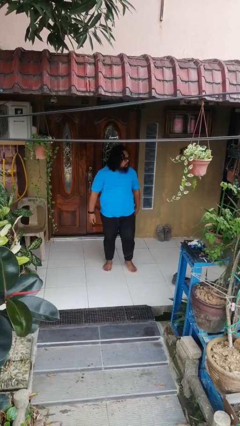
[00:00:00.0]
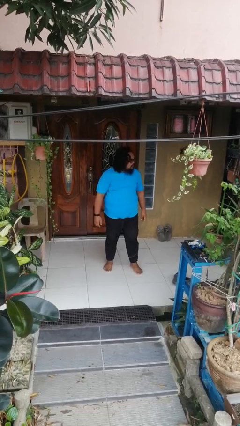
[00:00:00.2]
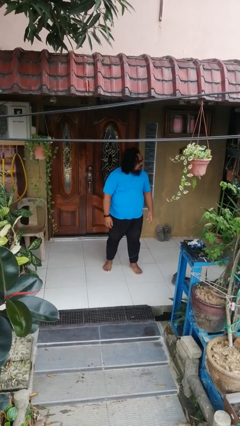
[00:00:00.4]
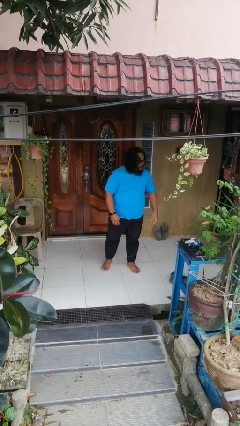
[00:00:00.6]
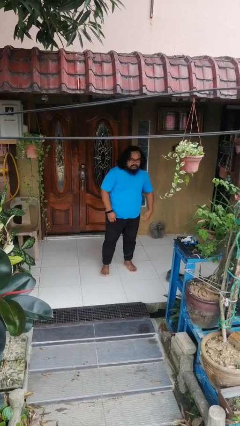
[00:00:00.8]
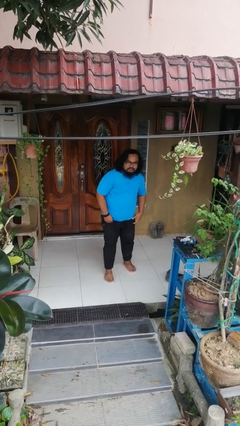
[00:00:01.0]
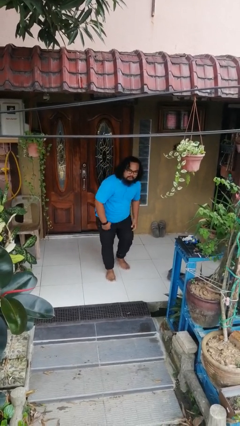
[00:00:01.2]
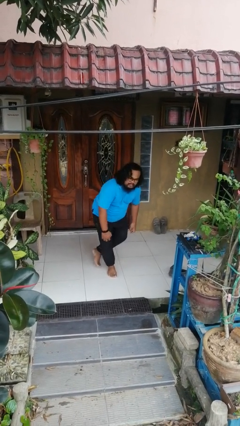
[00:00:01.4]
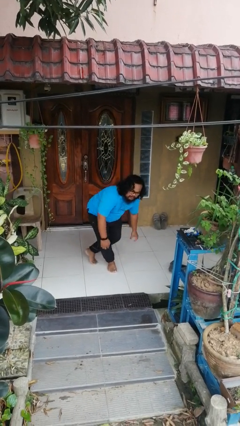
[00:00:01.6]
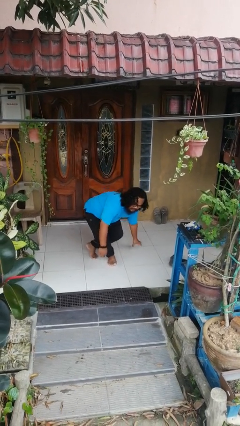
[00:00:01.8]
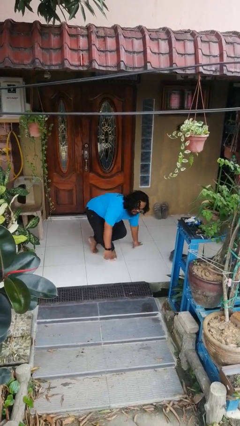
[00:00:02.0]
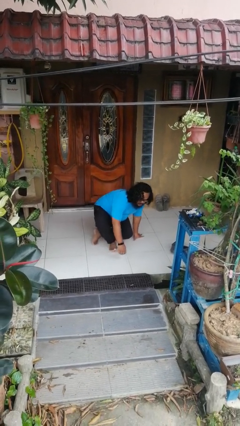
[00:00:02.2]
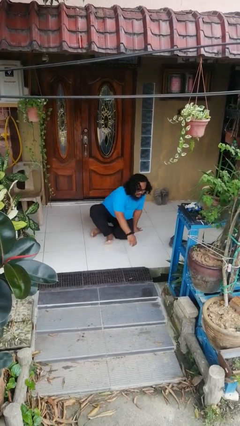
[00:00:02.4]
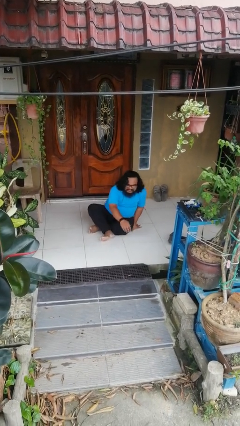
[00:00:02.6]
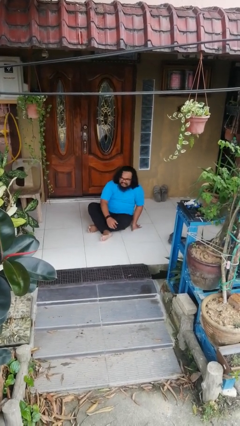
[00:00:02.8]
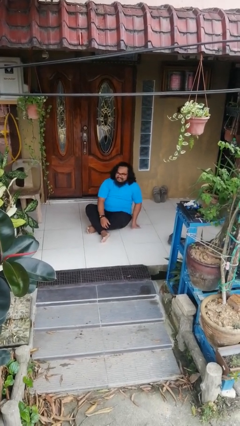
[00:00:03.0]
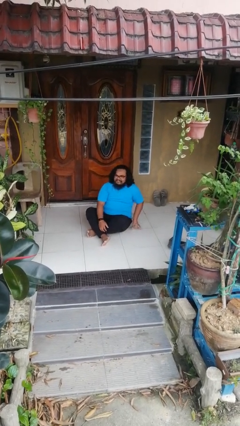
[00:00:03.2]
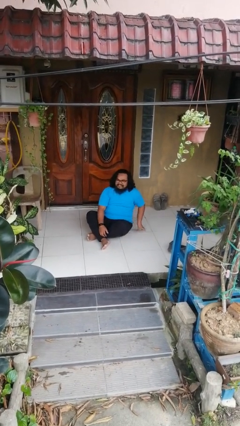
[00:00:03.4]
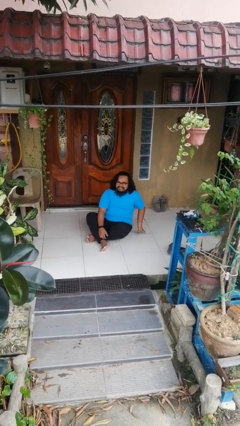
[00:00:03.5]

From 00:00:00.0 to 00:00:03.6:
person sits crisscross

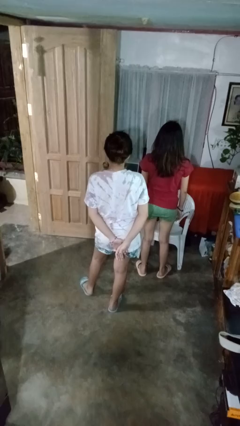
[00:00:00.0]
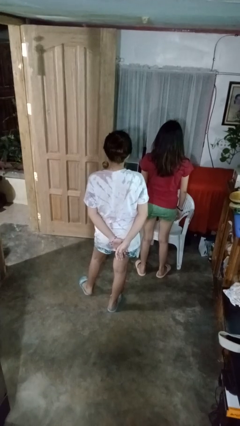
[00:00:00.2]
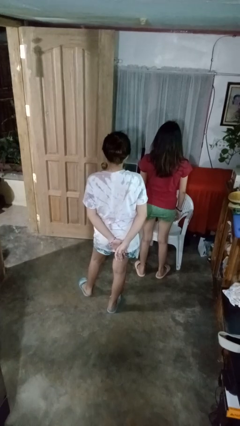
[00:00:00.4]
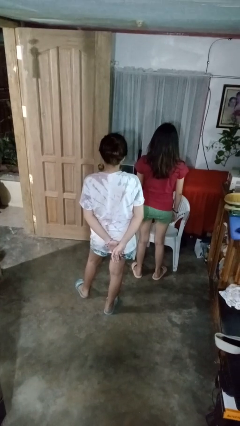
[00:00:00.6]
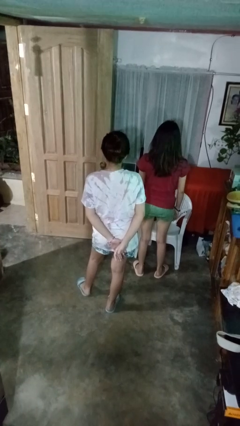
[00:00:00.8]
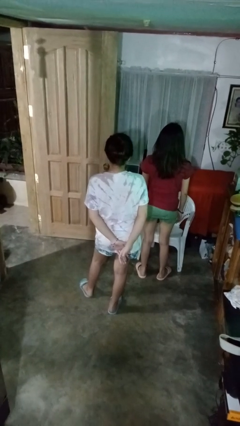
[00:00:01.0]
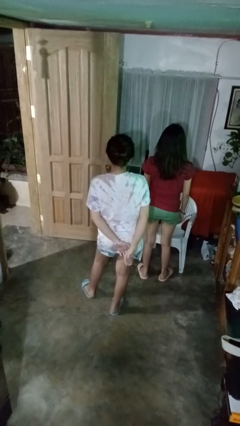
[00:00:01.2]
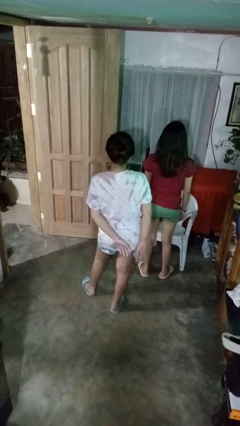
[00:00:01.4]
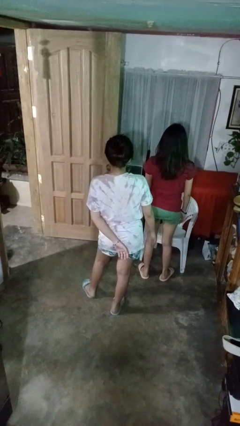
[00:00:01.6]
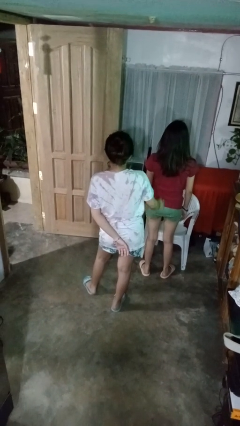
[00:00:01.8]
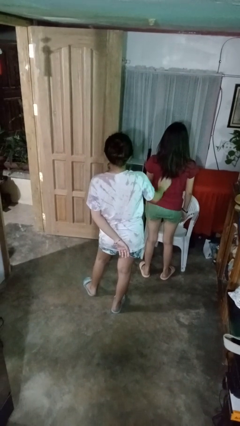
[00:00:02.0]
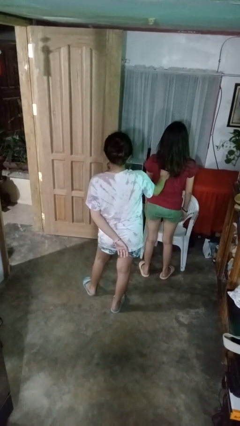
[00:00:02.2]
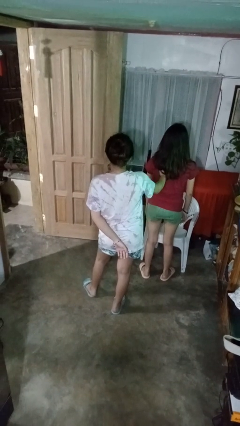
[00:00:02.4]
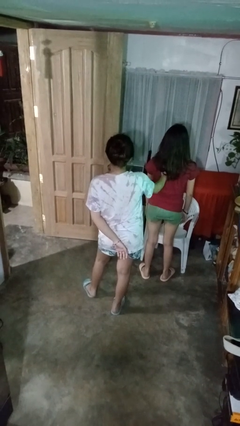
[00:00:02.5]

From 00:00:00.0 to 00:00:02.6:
person touches back of person

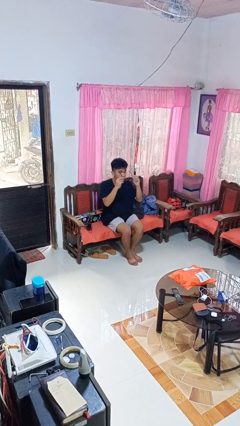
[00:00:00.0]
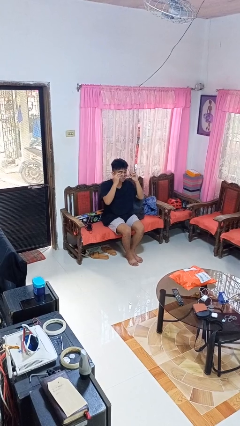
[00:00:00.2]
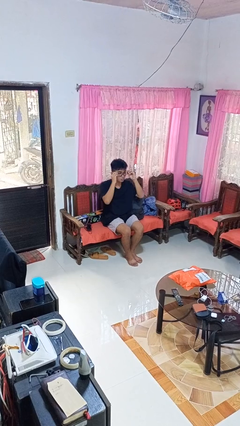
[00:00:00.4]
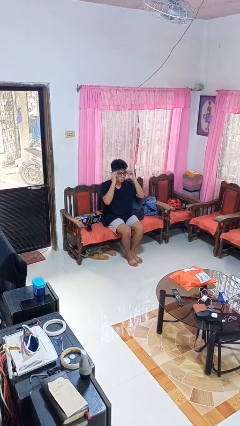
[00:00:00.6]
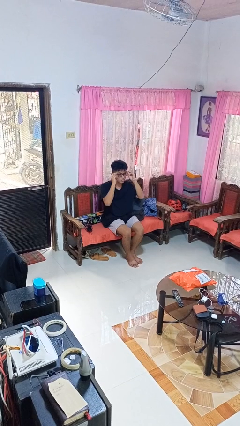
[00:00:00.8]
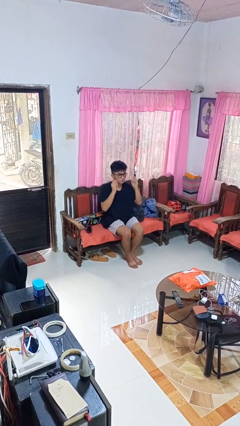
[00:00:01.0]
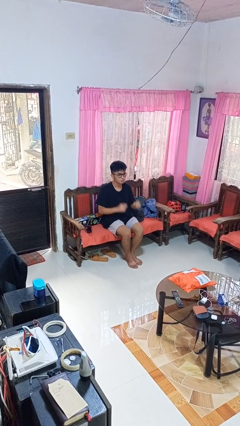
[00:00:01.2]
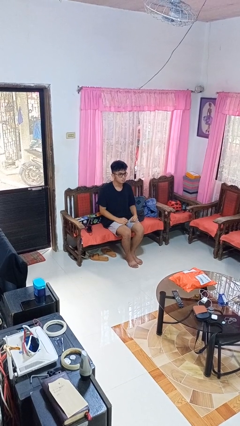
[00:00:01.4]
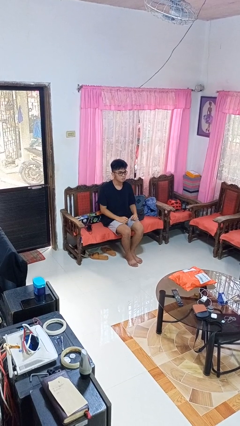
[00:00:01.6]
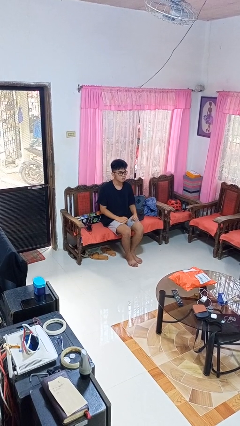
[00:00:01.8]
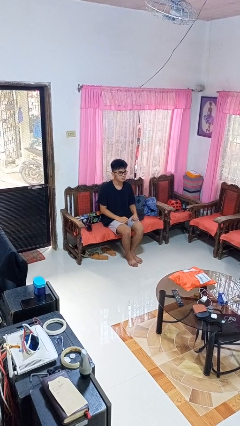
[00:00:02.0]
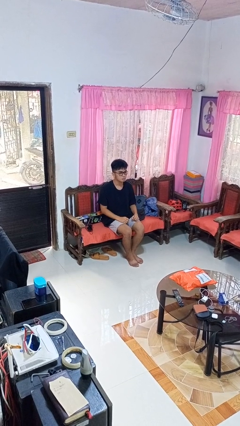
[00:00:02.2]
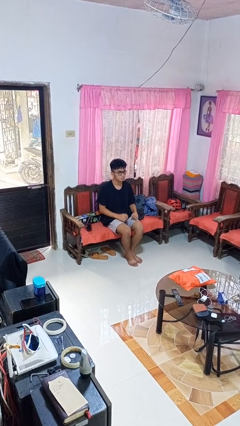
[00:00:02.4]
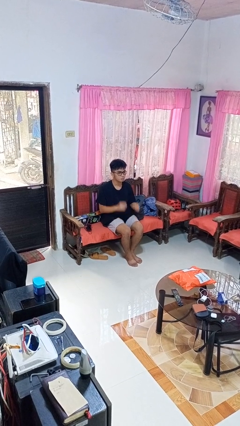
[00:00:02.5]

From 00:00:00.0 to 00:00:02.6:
person puts on glasses

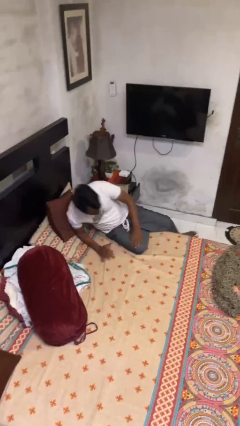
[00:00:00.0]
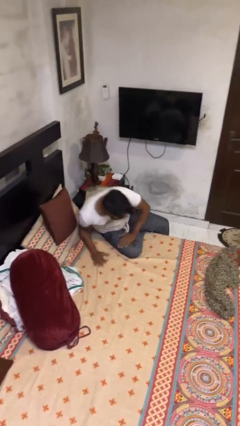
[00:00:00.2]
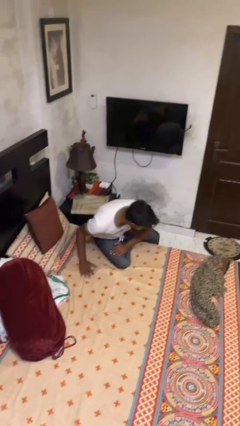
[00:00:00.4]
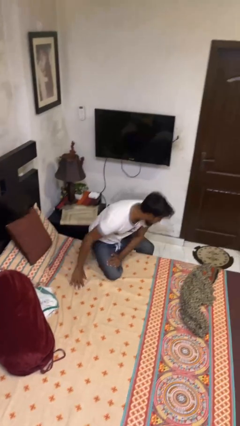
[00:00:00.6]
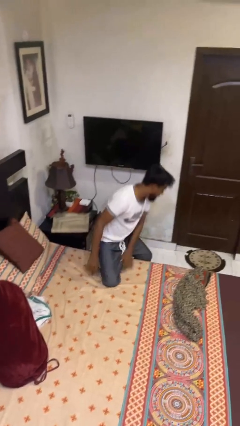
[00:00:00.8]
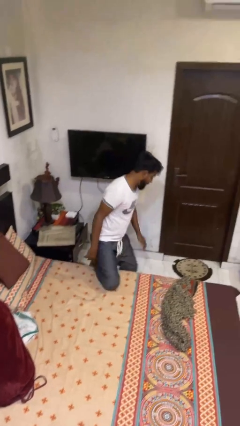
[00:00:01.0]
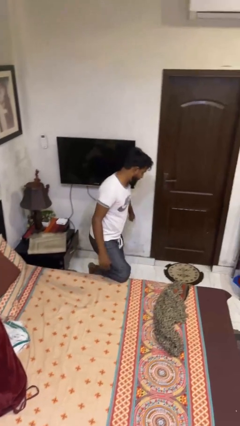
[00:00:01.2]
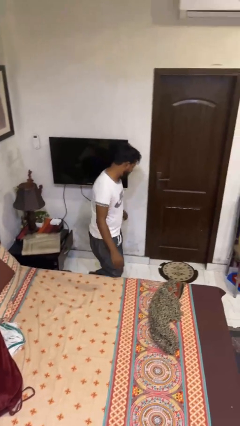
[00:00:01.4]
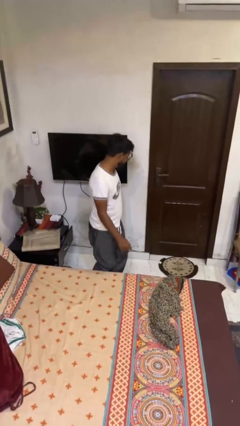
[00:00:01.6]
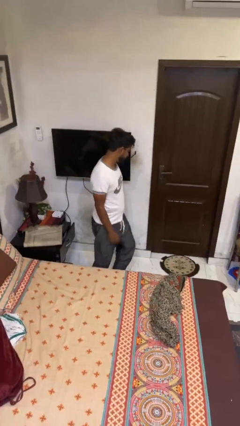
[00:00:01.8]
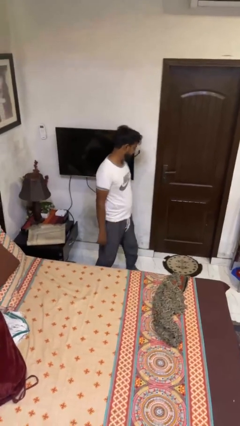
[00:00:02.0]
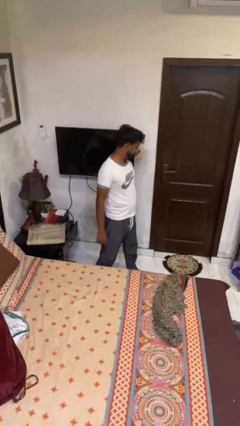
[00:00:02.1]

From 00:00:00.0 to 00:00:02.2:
person stands up

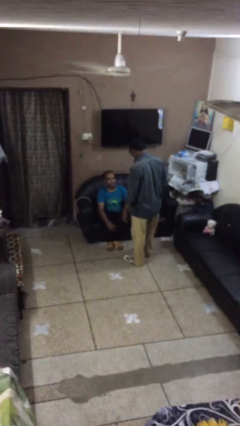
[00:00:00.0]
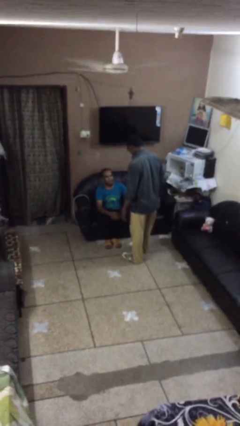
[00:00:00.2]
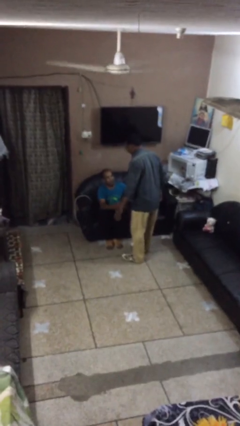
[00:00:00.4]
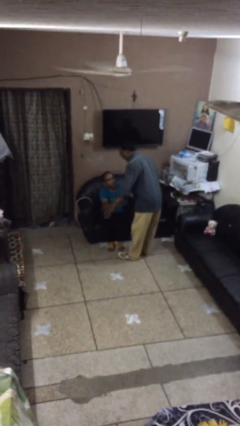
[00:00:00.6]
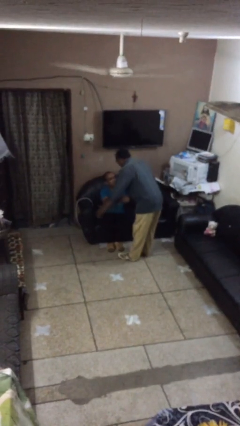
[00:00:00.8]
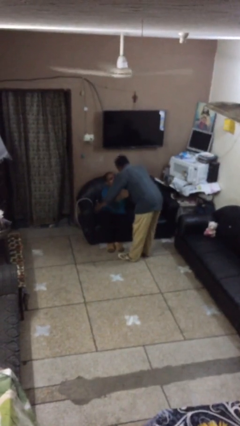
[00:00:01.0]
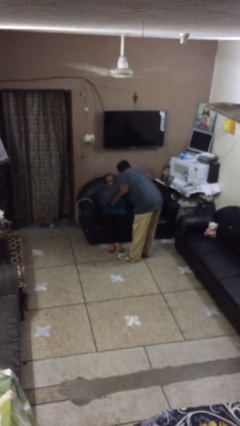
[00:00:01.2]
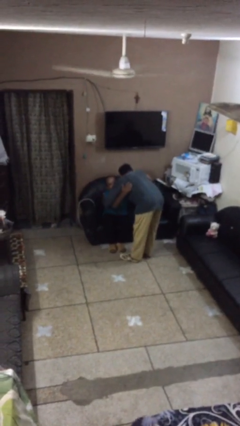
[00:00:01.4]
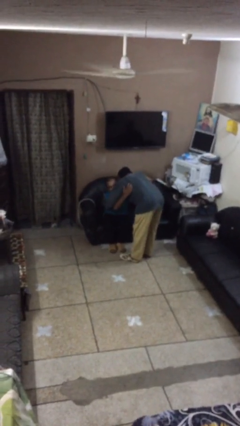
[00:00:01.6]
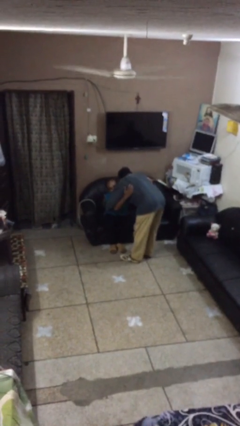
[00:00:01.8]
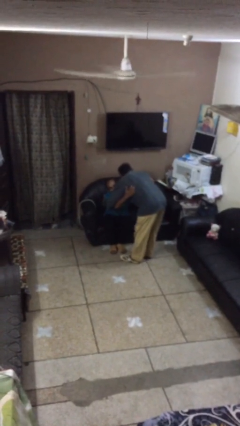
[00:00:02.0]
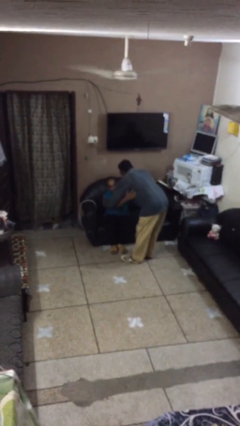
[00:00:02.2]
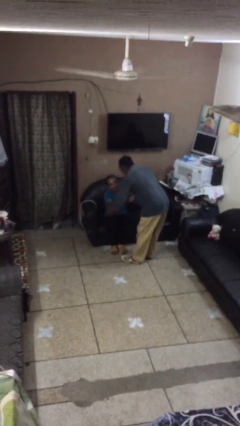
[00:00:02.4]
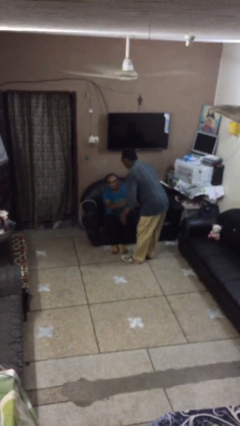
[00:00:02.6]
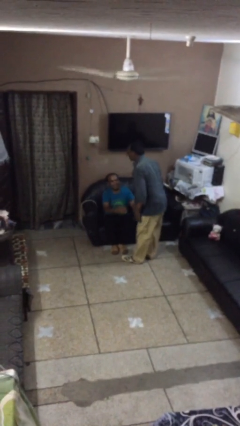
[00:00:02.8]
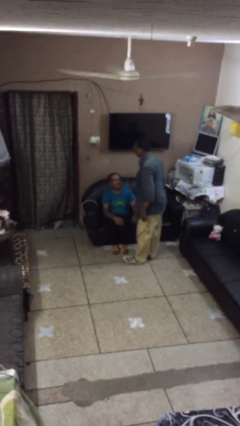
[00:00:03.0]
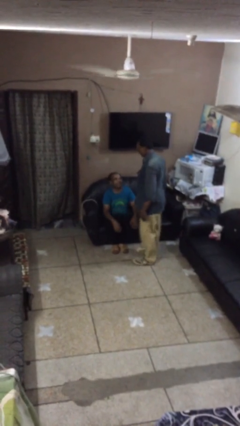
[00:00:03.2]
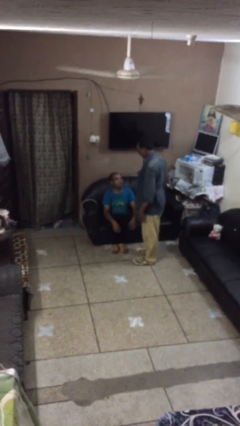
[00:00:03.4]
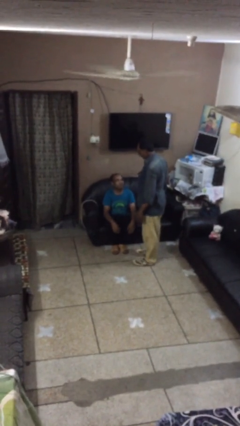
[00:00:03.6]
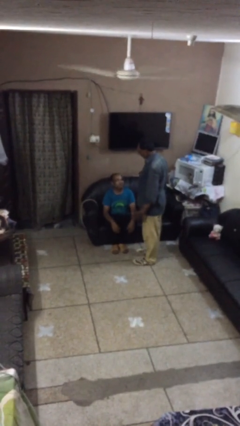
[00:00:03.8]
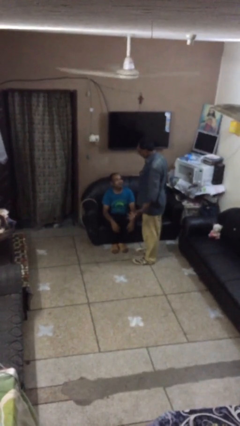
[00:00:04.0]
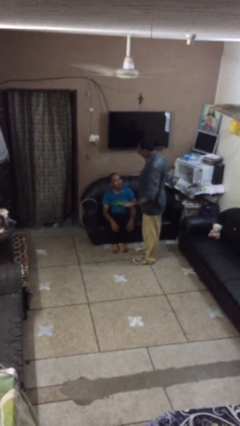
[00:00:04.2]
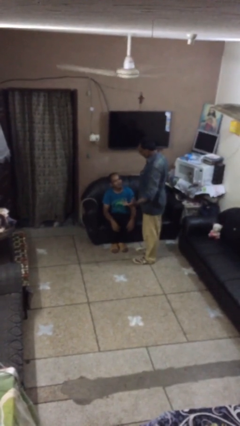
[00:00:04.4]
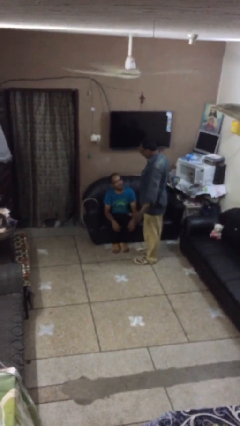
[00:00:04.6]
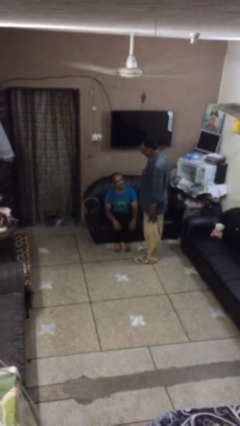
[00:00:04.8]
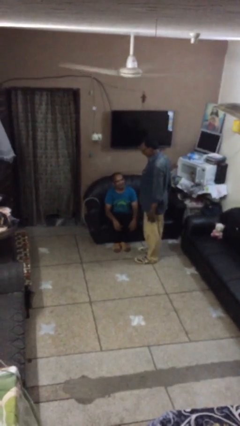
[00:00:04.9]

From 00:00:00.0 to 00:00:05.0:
person embraces person

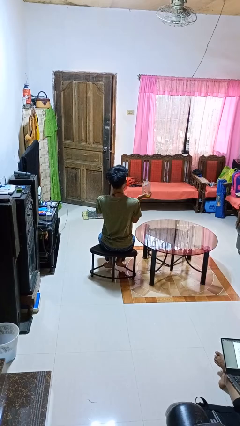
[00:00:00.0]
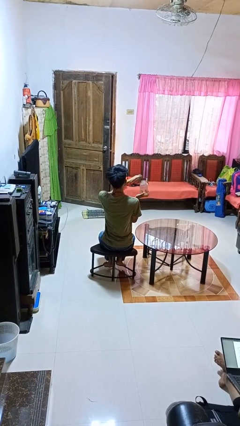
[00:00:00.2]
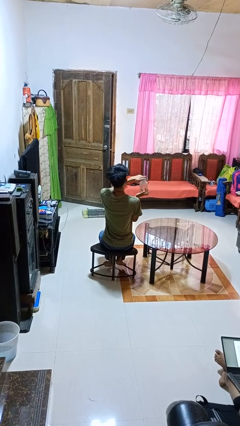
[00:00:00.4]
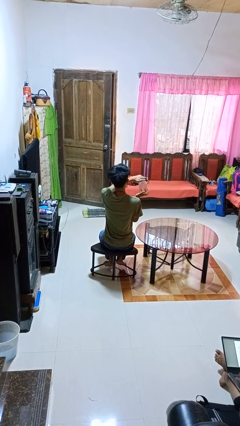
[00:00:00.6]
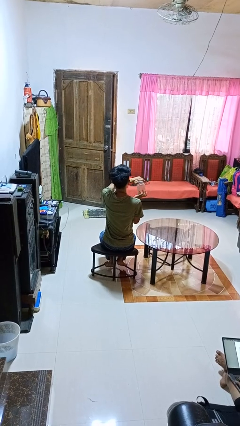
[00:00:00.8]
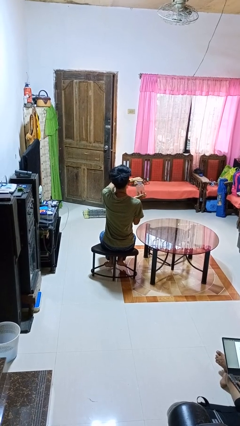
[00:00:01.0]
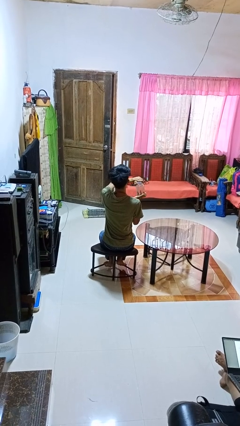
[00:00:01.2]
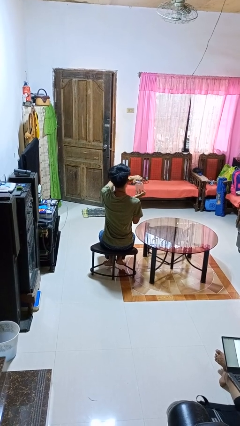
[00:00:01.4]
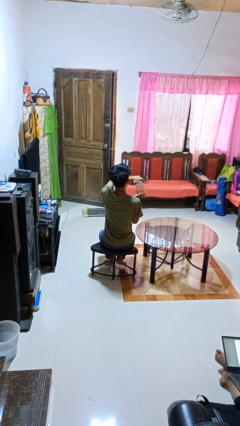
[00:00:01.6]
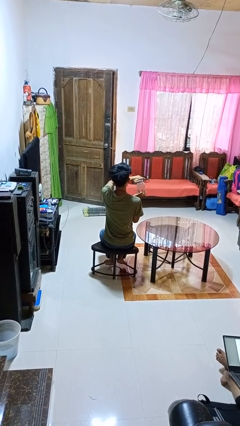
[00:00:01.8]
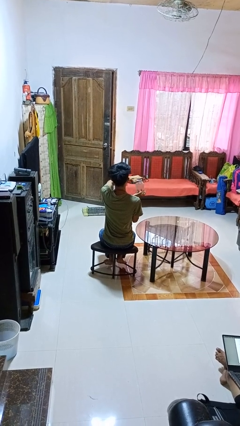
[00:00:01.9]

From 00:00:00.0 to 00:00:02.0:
person closes jar
